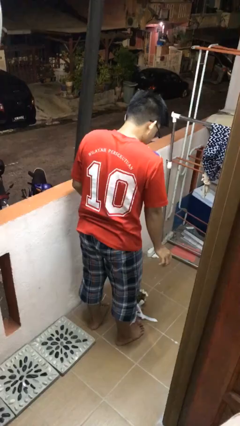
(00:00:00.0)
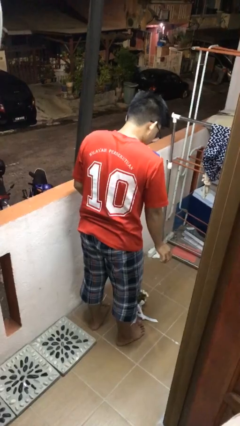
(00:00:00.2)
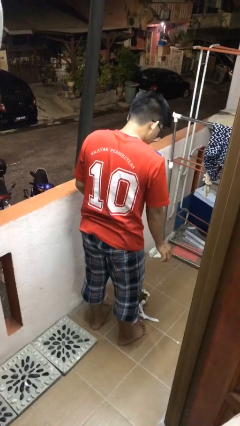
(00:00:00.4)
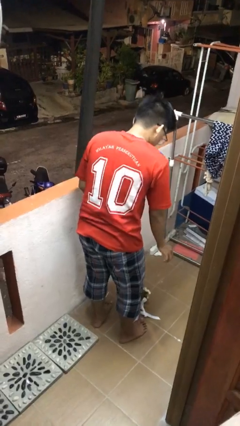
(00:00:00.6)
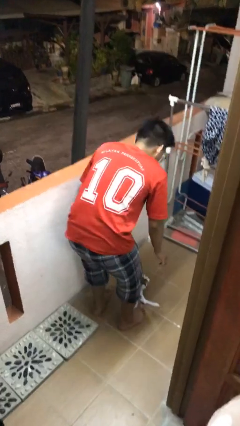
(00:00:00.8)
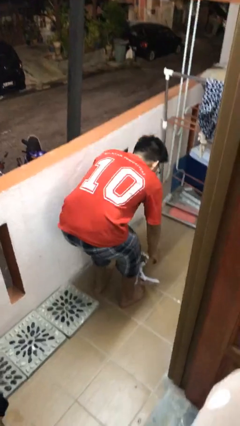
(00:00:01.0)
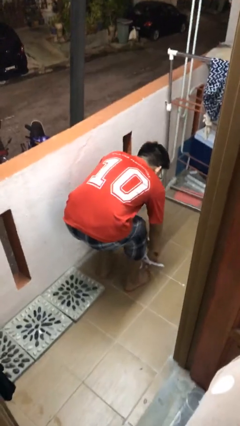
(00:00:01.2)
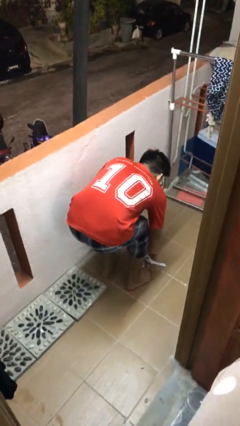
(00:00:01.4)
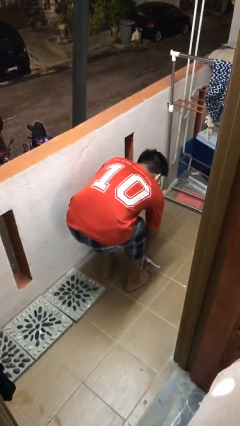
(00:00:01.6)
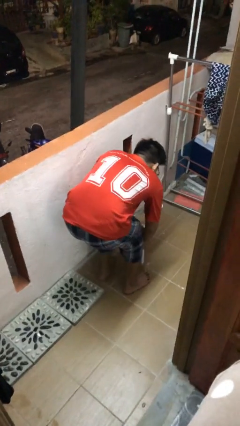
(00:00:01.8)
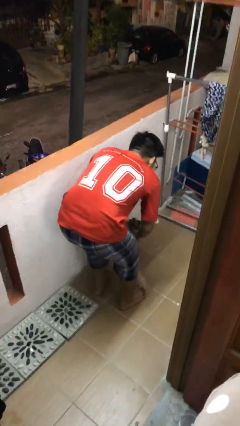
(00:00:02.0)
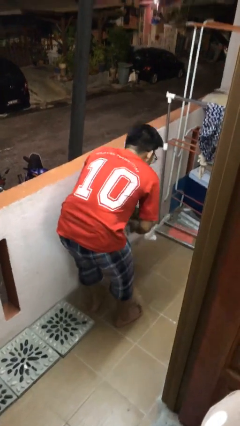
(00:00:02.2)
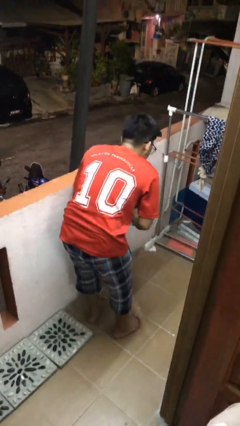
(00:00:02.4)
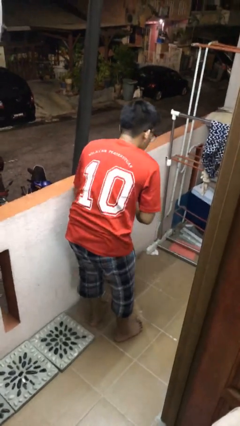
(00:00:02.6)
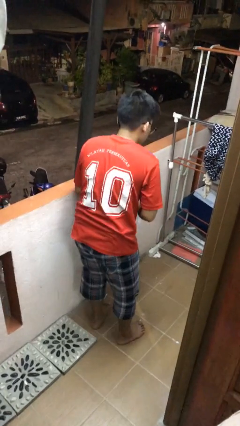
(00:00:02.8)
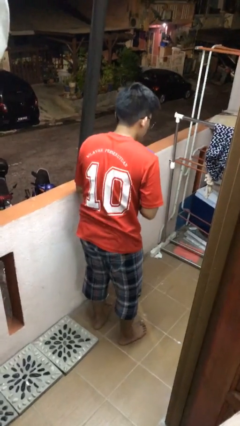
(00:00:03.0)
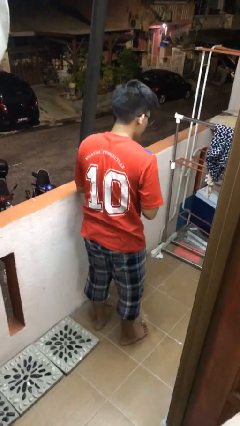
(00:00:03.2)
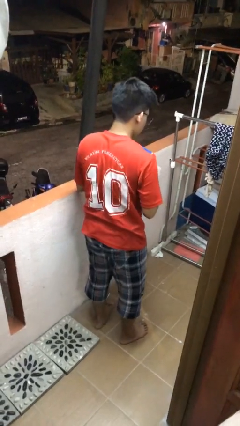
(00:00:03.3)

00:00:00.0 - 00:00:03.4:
person picks up object from floor

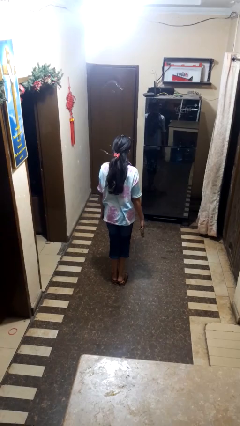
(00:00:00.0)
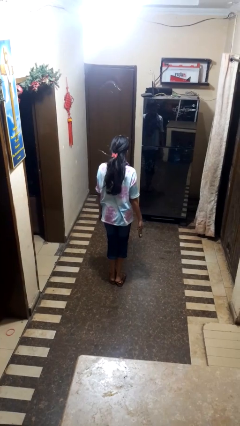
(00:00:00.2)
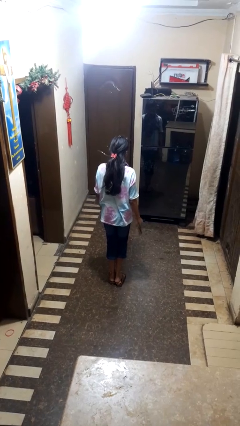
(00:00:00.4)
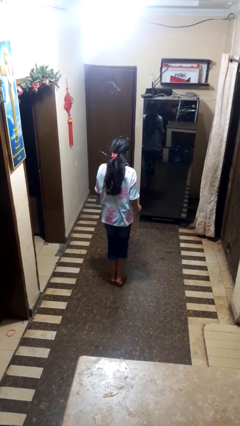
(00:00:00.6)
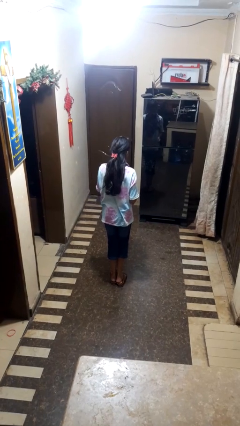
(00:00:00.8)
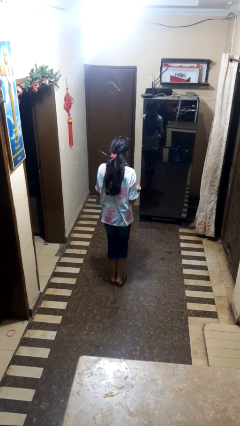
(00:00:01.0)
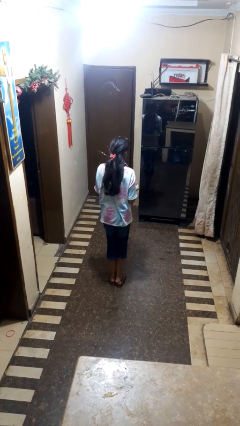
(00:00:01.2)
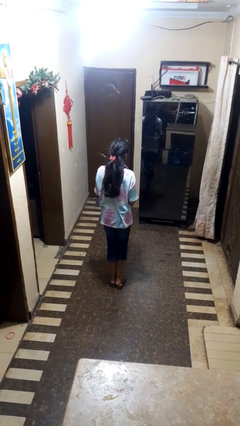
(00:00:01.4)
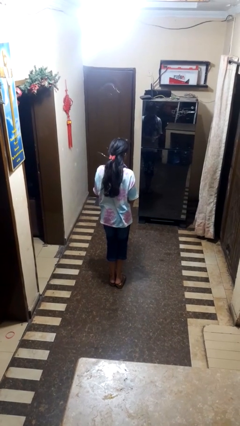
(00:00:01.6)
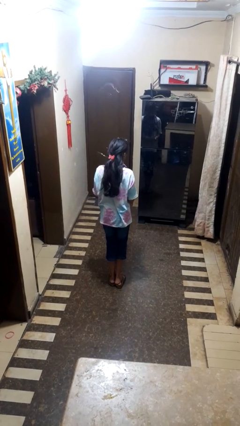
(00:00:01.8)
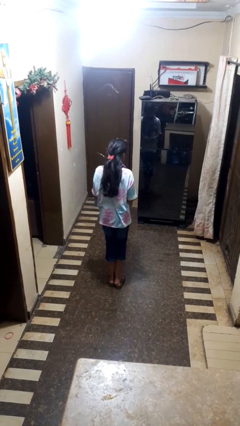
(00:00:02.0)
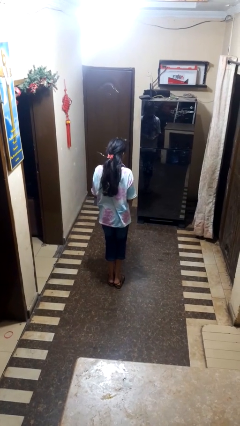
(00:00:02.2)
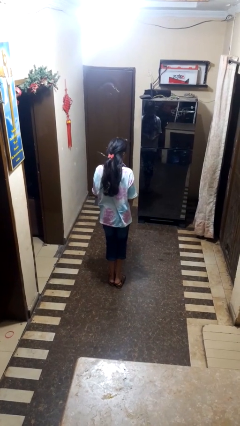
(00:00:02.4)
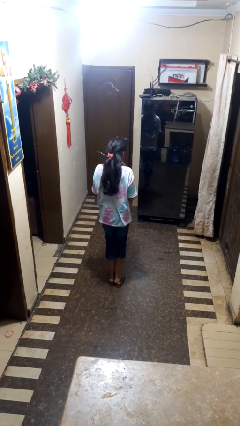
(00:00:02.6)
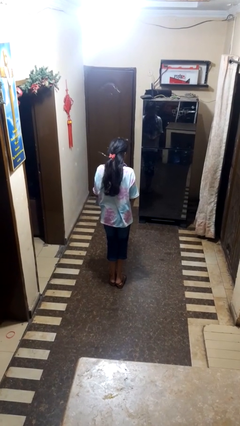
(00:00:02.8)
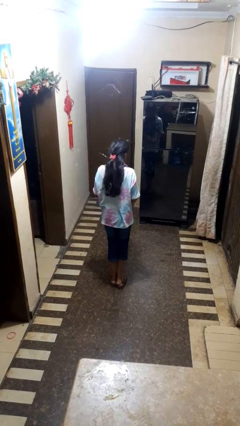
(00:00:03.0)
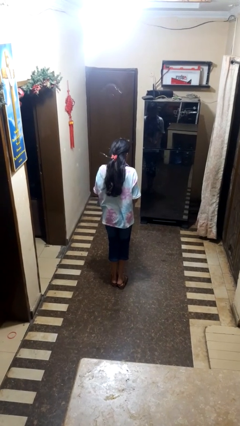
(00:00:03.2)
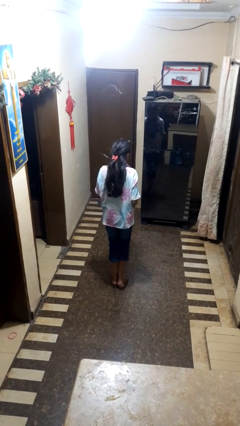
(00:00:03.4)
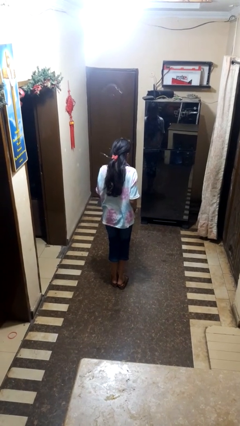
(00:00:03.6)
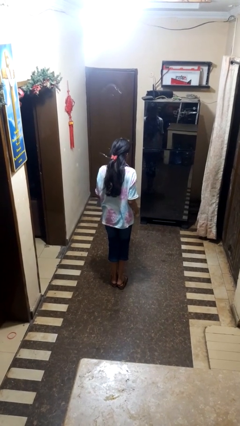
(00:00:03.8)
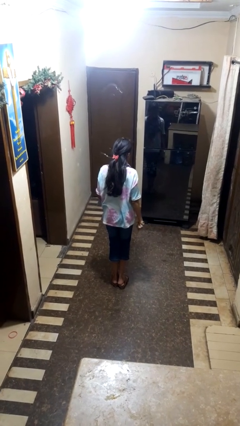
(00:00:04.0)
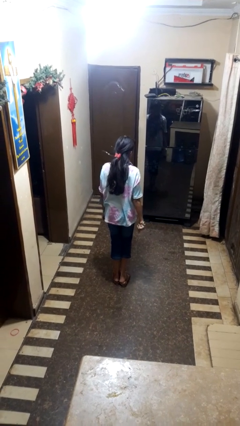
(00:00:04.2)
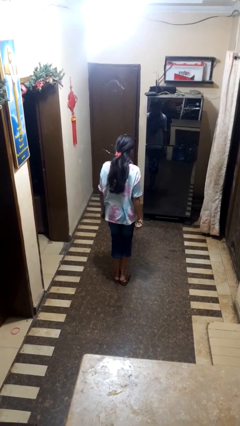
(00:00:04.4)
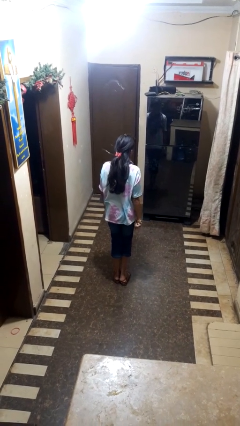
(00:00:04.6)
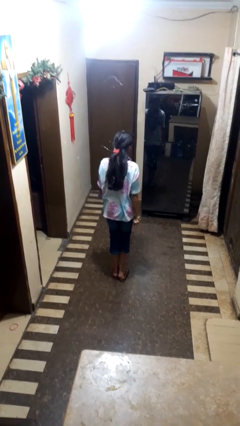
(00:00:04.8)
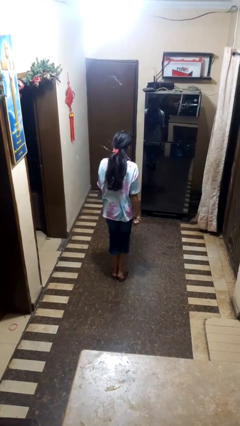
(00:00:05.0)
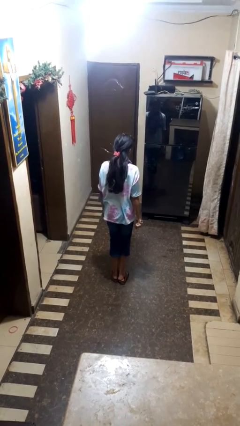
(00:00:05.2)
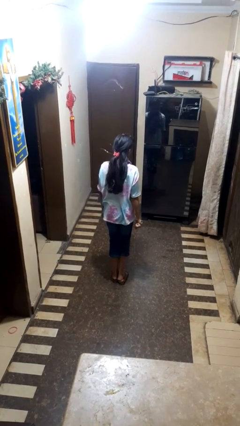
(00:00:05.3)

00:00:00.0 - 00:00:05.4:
person puts on wristwatch

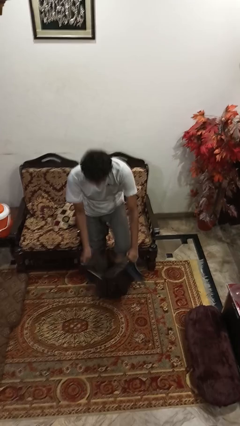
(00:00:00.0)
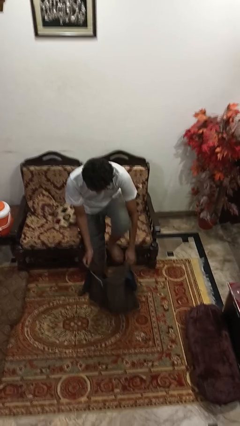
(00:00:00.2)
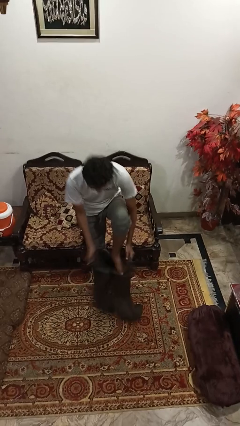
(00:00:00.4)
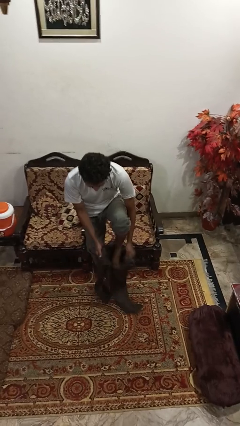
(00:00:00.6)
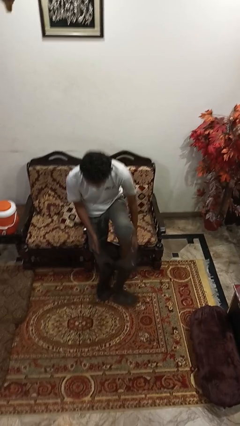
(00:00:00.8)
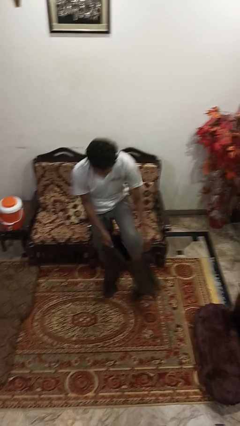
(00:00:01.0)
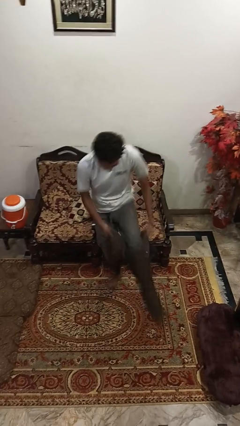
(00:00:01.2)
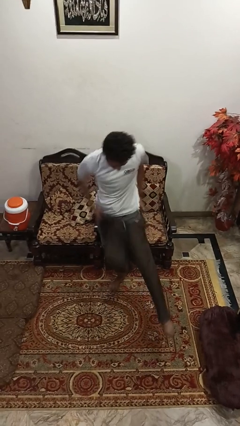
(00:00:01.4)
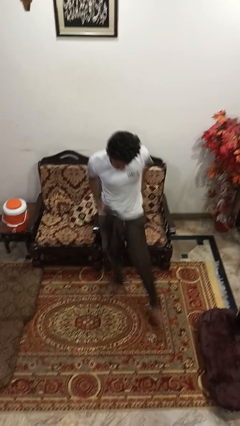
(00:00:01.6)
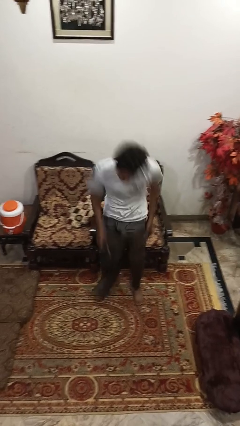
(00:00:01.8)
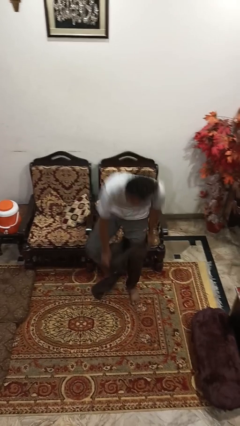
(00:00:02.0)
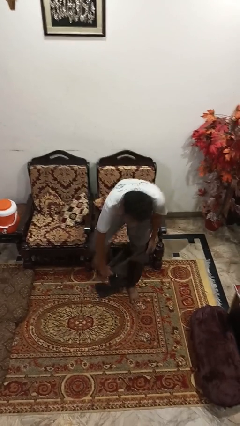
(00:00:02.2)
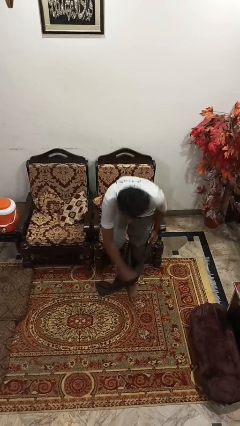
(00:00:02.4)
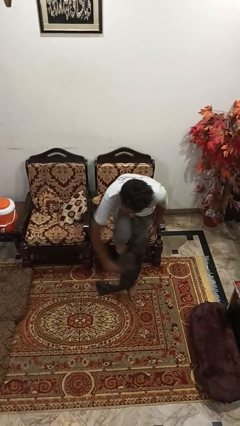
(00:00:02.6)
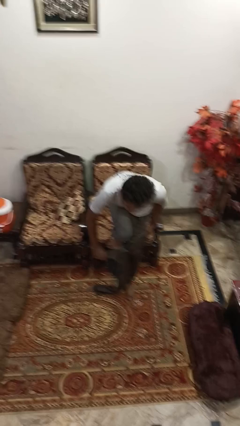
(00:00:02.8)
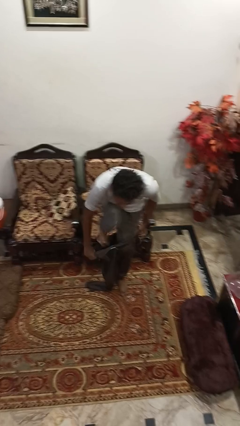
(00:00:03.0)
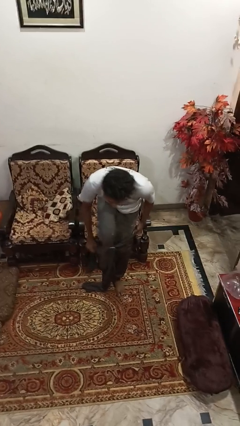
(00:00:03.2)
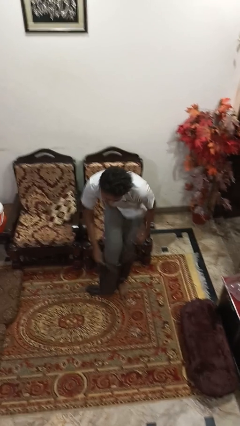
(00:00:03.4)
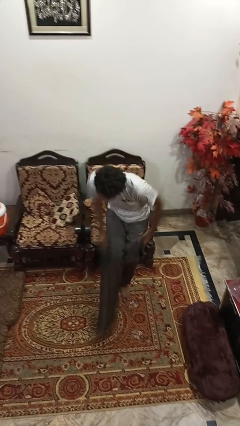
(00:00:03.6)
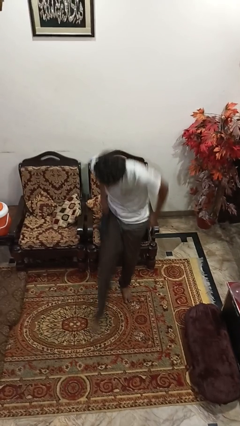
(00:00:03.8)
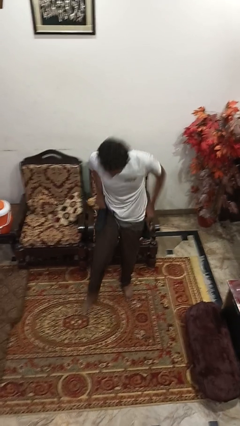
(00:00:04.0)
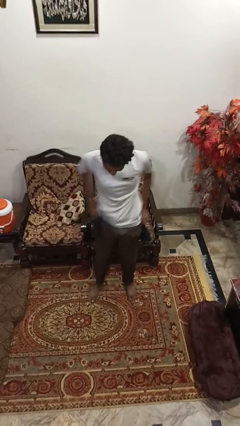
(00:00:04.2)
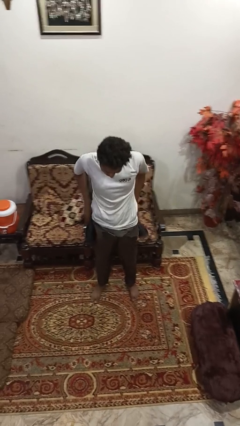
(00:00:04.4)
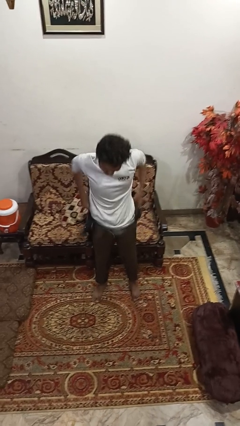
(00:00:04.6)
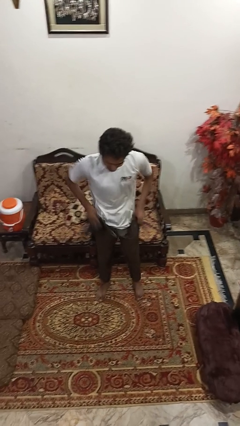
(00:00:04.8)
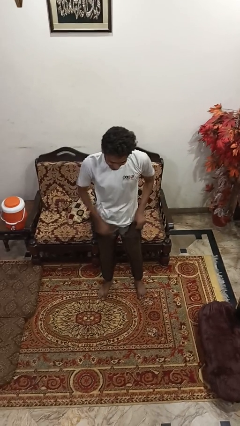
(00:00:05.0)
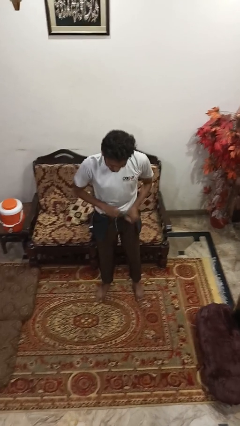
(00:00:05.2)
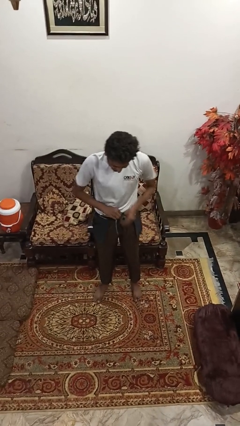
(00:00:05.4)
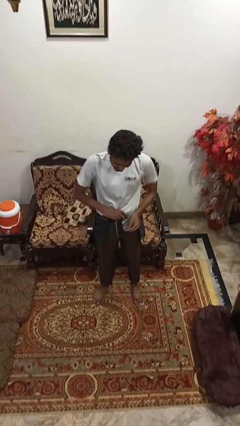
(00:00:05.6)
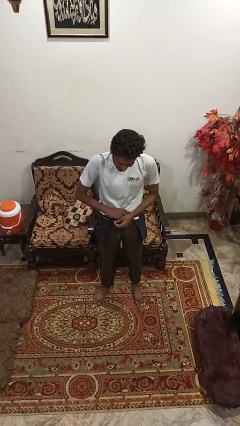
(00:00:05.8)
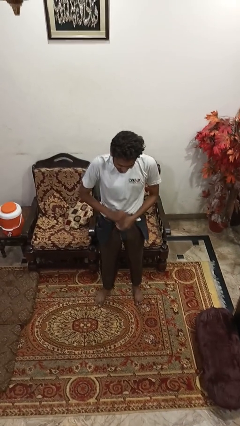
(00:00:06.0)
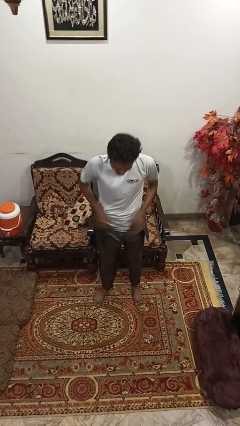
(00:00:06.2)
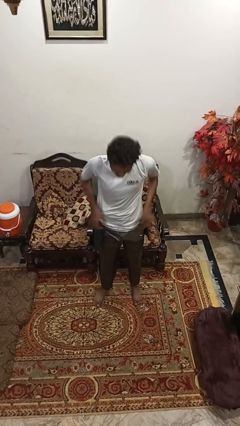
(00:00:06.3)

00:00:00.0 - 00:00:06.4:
person puts on pants

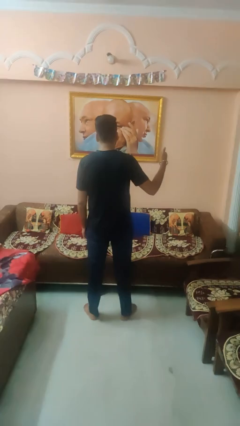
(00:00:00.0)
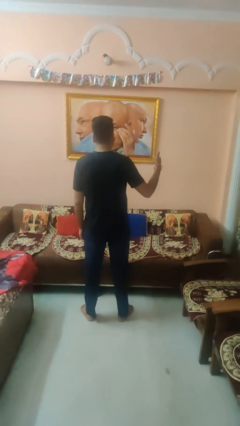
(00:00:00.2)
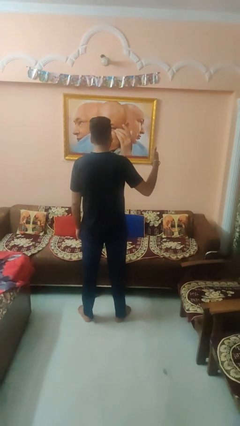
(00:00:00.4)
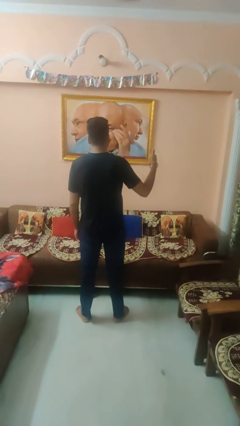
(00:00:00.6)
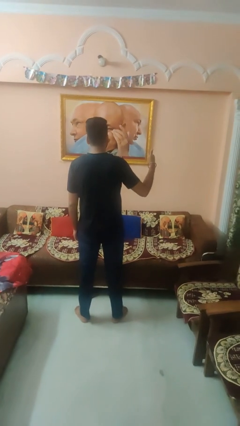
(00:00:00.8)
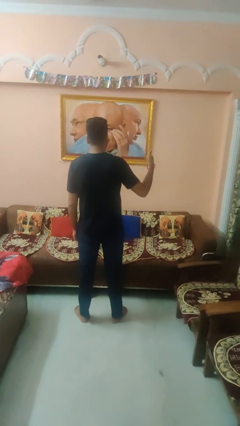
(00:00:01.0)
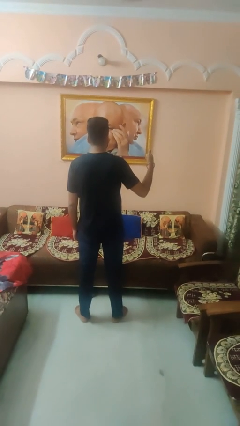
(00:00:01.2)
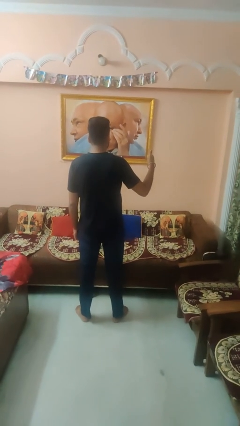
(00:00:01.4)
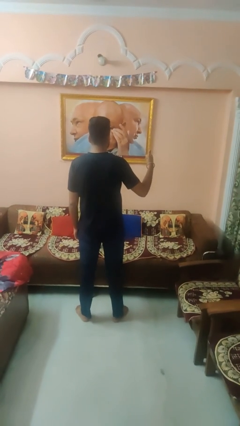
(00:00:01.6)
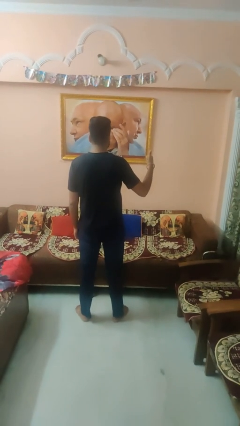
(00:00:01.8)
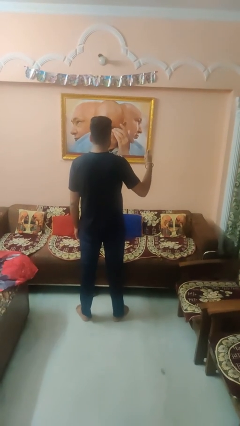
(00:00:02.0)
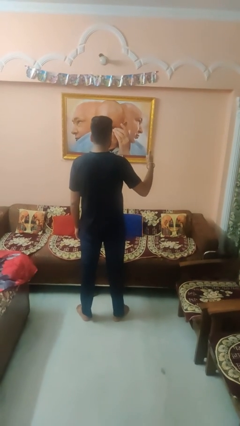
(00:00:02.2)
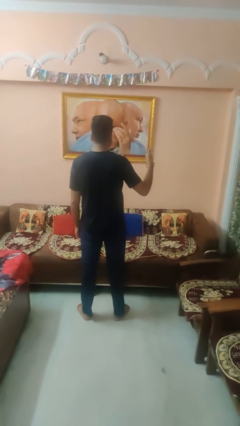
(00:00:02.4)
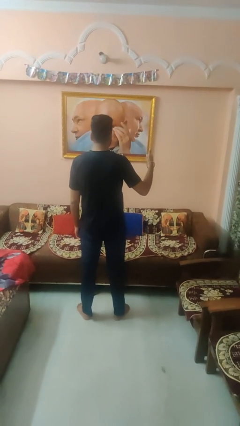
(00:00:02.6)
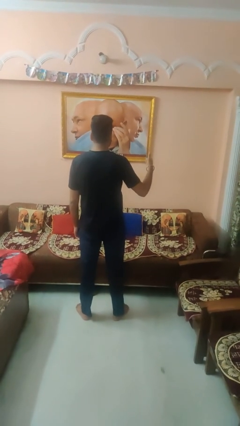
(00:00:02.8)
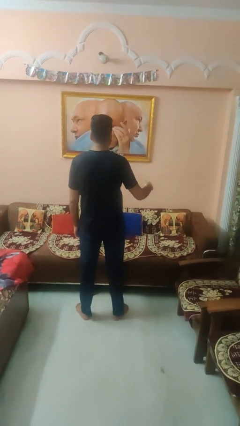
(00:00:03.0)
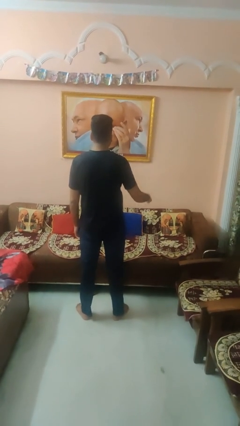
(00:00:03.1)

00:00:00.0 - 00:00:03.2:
person gestures thumbs up
